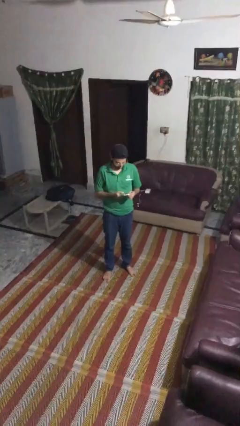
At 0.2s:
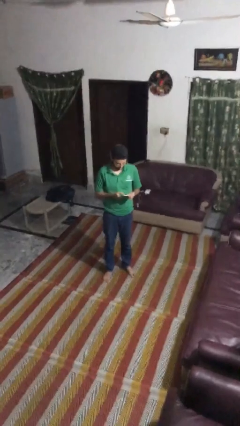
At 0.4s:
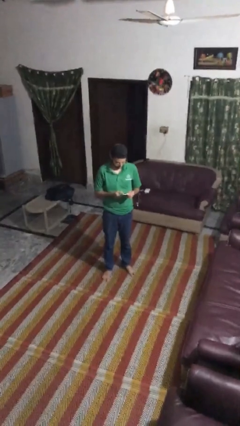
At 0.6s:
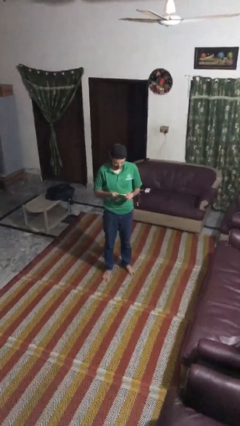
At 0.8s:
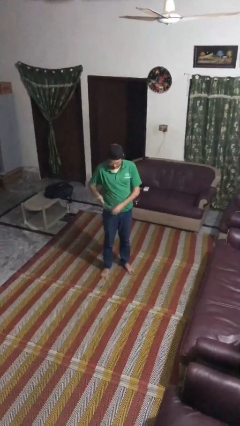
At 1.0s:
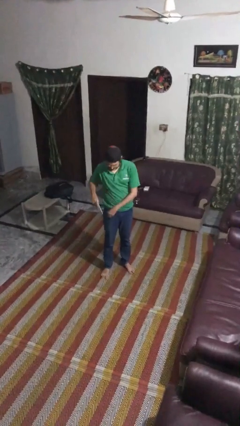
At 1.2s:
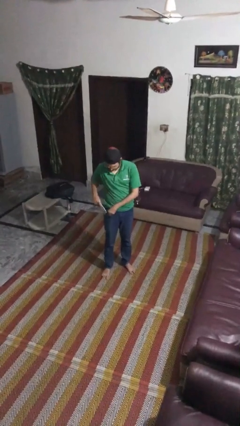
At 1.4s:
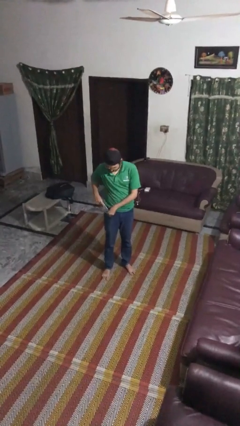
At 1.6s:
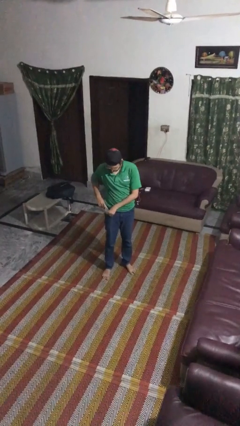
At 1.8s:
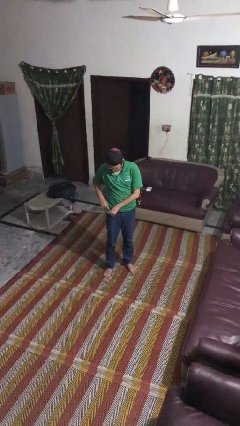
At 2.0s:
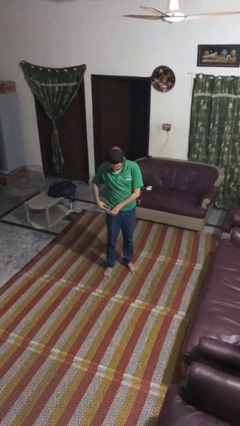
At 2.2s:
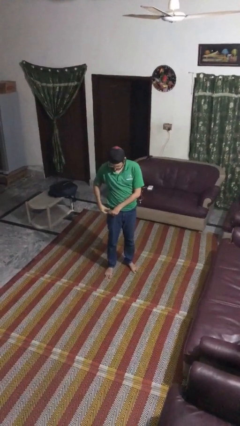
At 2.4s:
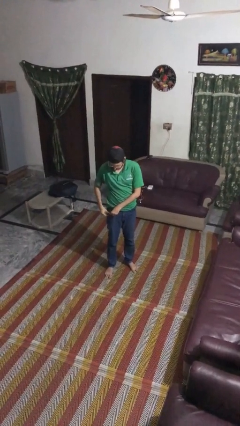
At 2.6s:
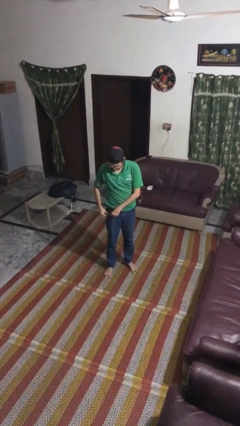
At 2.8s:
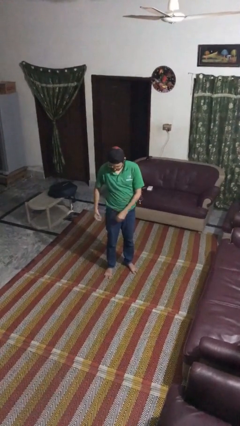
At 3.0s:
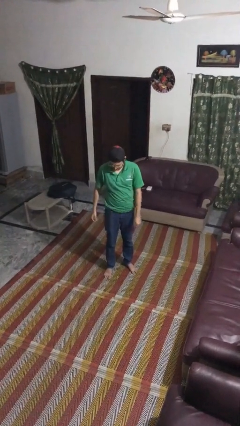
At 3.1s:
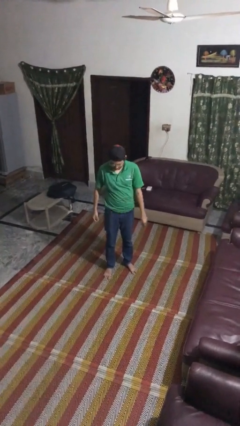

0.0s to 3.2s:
person puts phone into pocket

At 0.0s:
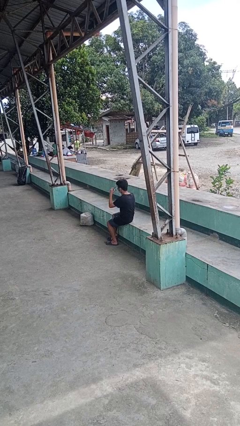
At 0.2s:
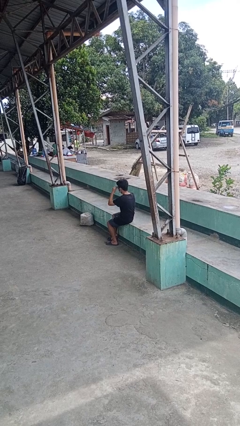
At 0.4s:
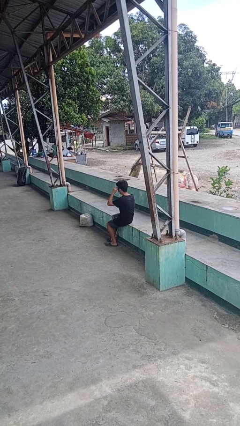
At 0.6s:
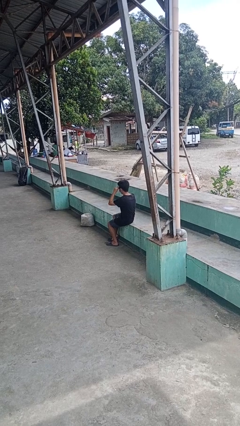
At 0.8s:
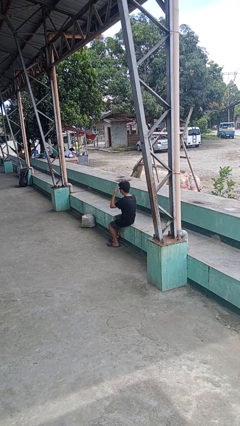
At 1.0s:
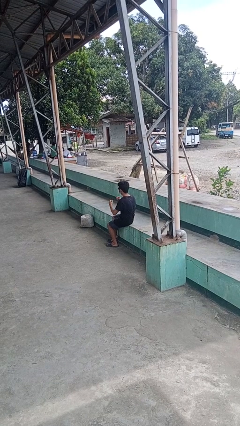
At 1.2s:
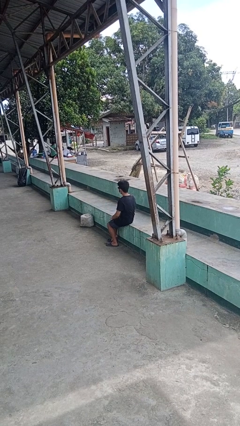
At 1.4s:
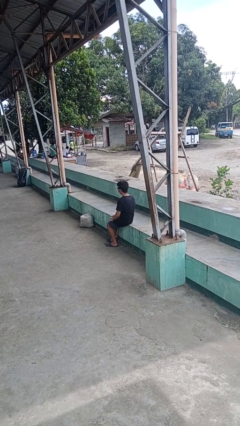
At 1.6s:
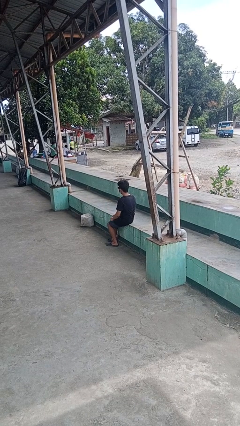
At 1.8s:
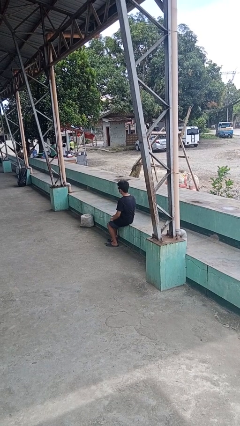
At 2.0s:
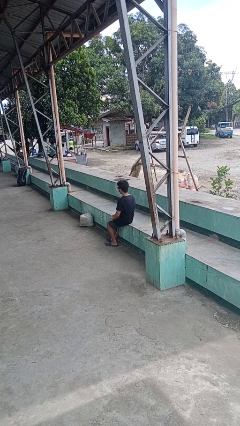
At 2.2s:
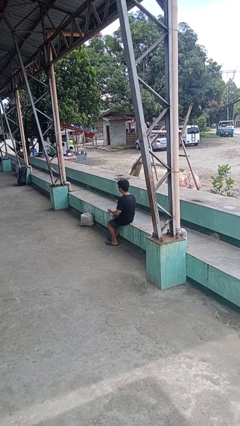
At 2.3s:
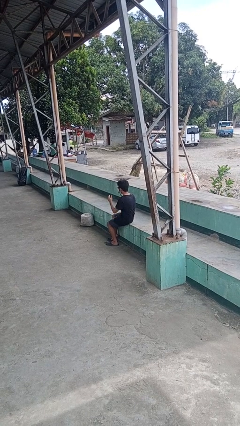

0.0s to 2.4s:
person puts on sunglasses

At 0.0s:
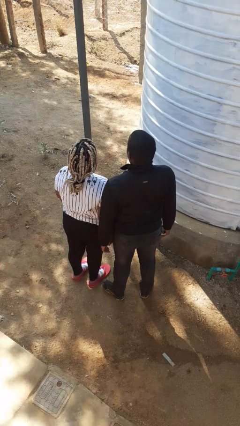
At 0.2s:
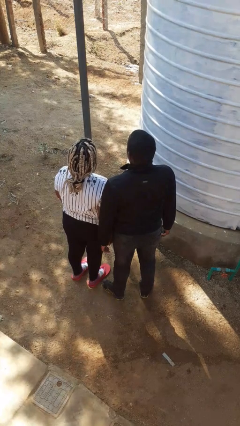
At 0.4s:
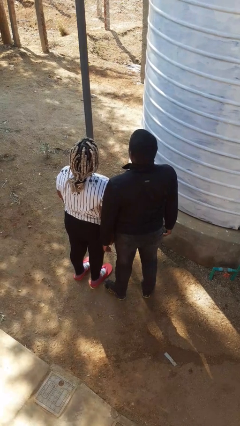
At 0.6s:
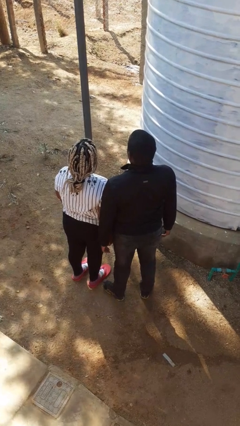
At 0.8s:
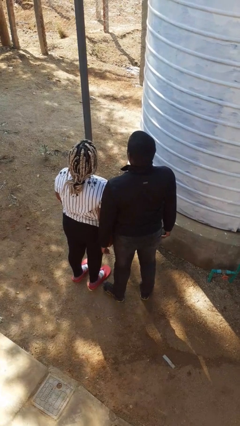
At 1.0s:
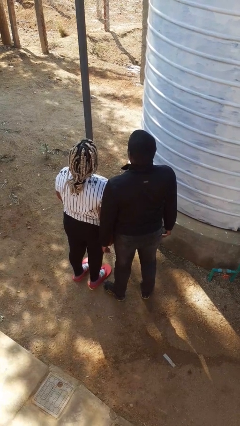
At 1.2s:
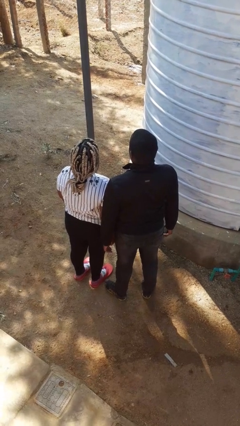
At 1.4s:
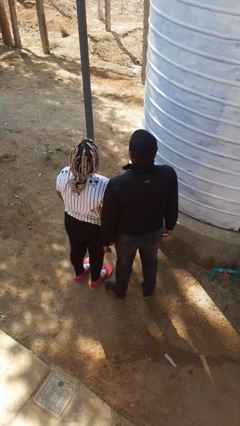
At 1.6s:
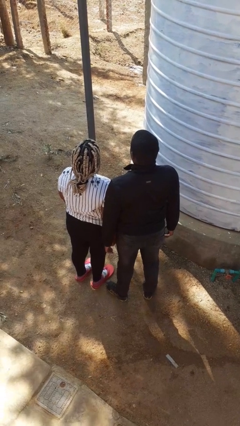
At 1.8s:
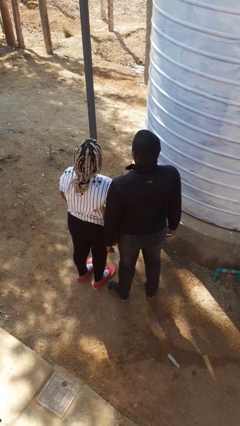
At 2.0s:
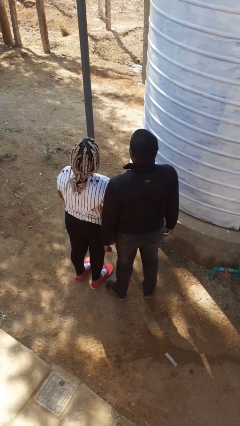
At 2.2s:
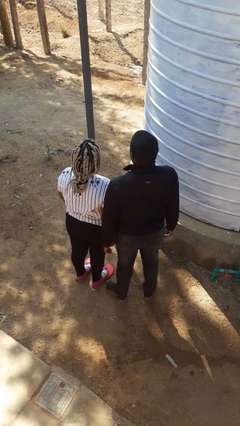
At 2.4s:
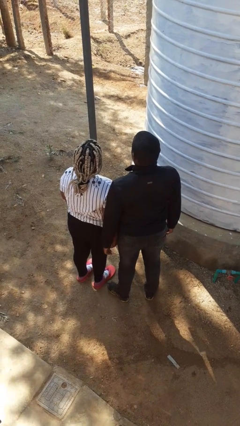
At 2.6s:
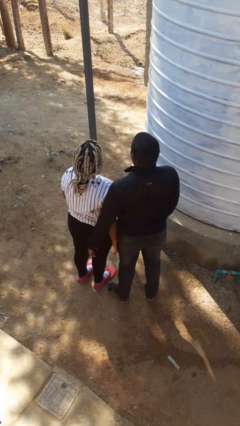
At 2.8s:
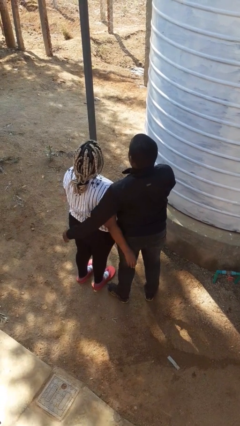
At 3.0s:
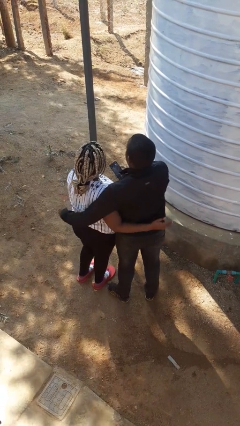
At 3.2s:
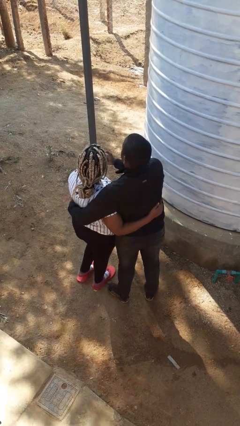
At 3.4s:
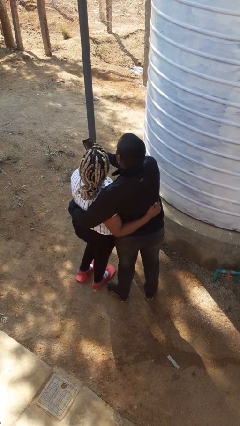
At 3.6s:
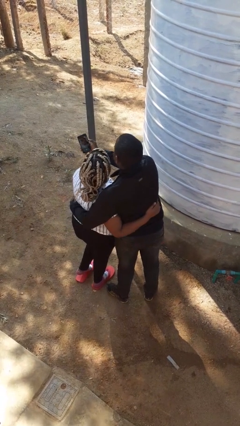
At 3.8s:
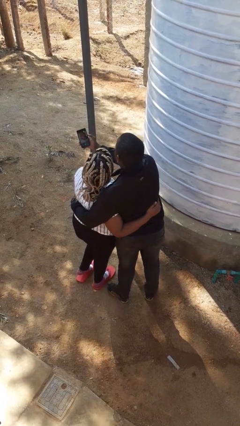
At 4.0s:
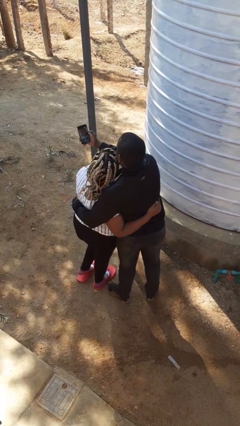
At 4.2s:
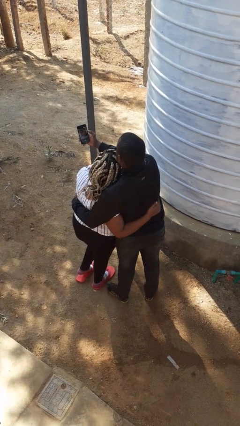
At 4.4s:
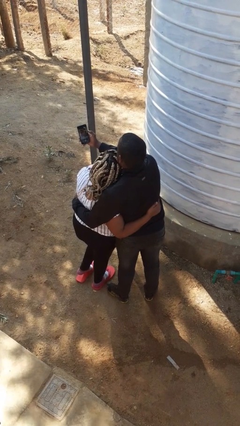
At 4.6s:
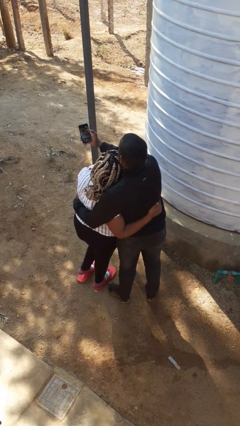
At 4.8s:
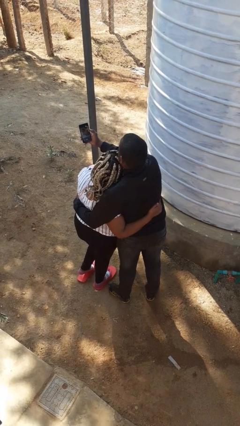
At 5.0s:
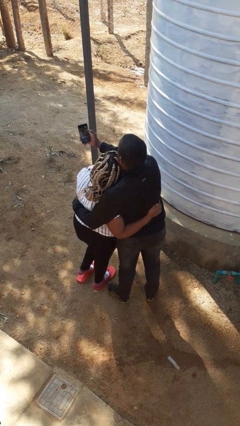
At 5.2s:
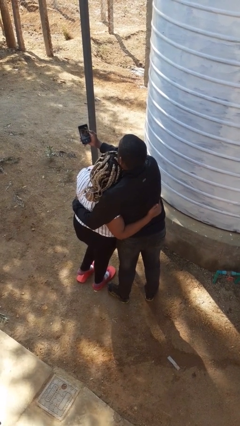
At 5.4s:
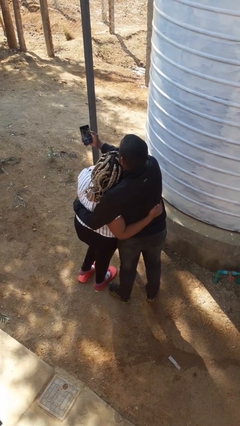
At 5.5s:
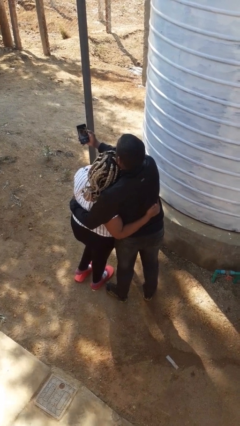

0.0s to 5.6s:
person takes selfie with person

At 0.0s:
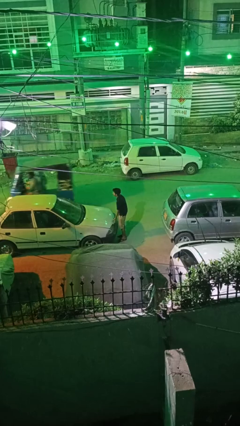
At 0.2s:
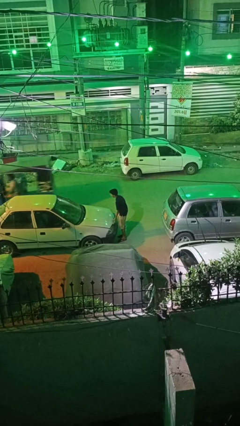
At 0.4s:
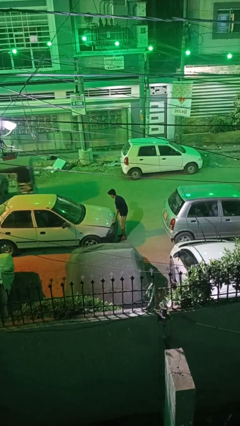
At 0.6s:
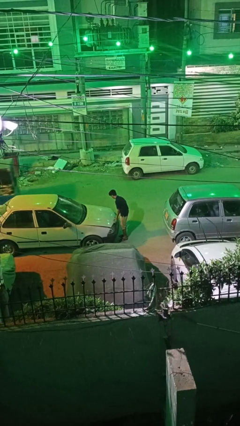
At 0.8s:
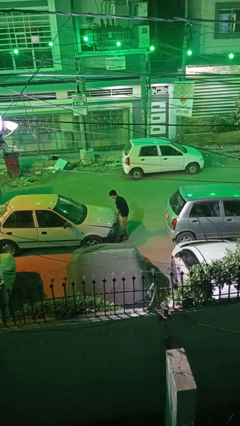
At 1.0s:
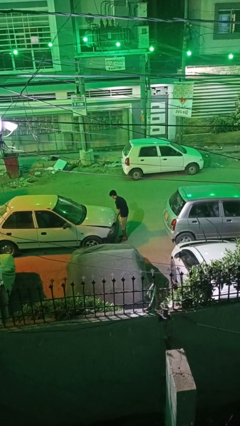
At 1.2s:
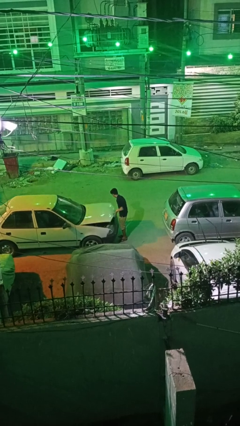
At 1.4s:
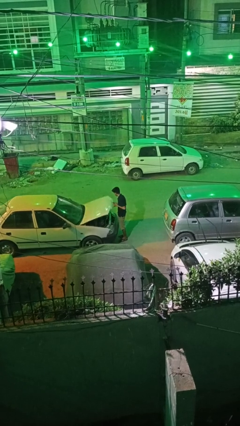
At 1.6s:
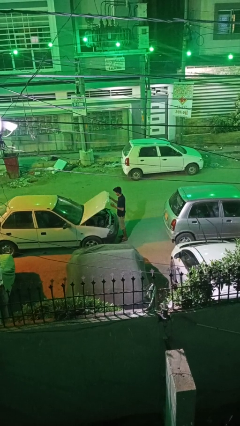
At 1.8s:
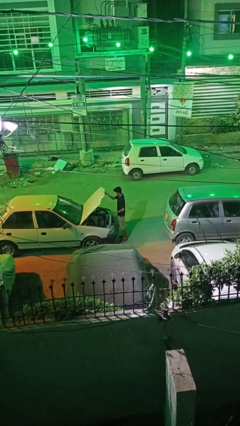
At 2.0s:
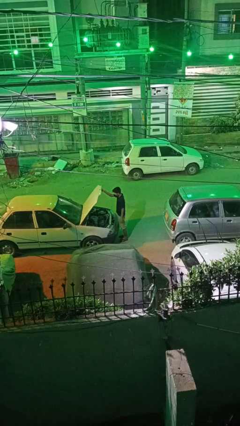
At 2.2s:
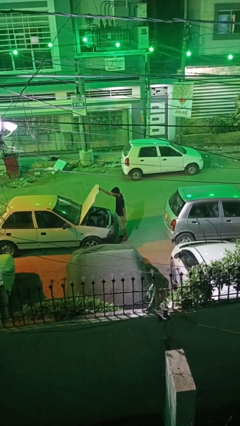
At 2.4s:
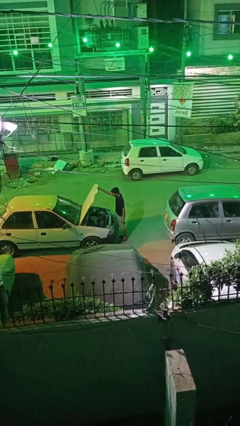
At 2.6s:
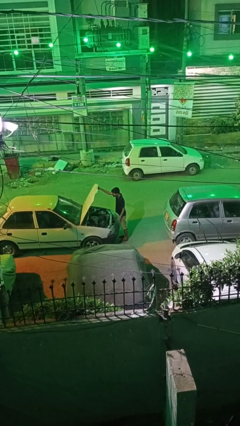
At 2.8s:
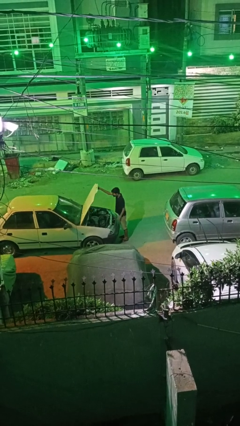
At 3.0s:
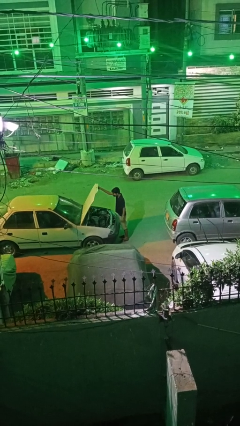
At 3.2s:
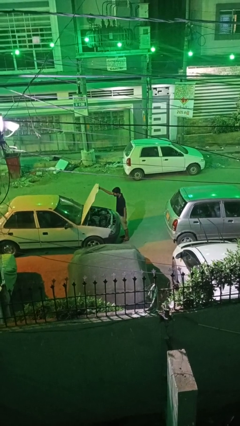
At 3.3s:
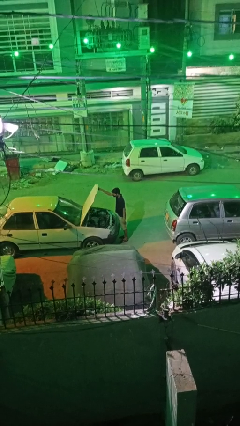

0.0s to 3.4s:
person opens car hood

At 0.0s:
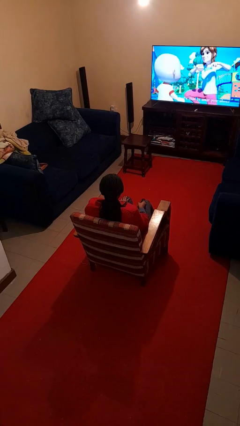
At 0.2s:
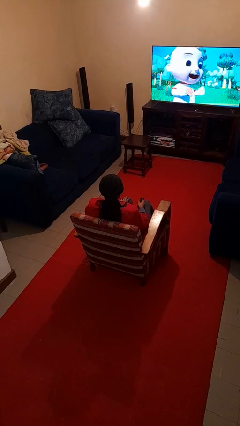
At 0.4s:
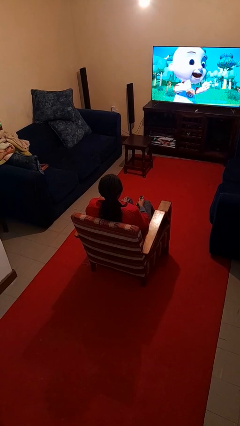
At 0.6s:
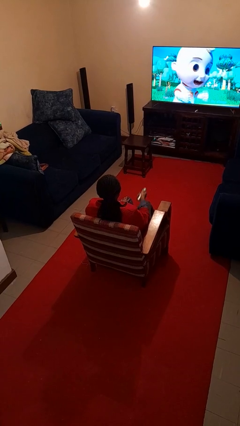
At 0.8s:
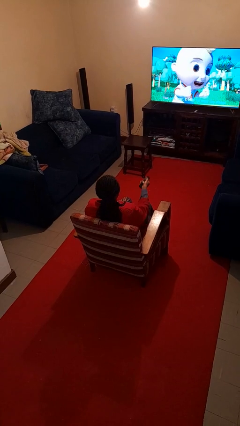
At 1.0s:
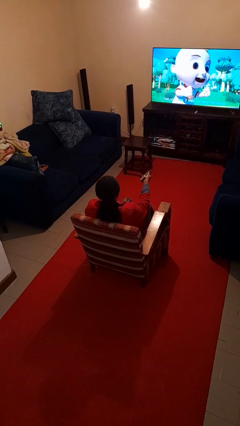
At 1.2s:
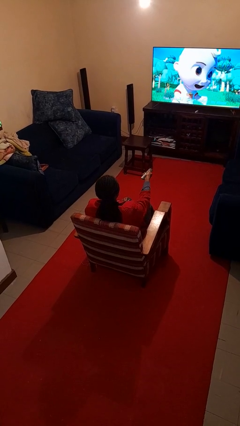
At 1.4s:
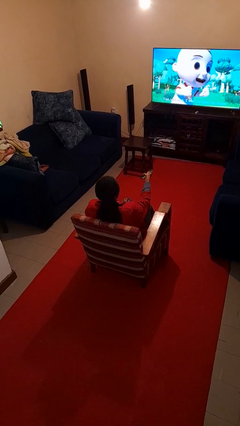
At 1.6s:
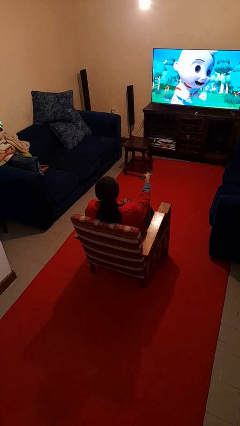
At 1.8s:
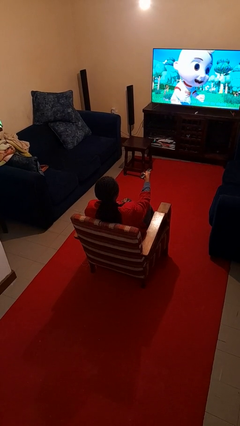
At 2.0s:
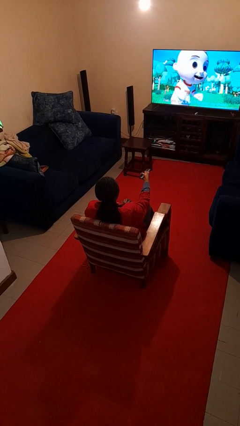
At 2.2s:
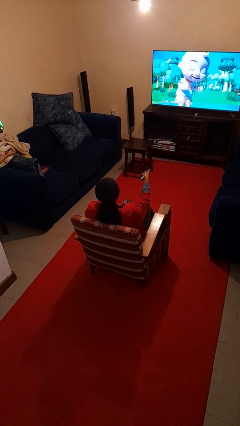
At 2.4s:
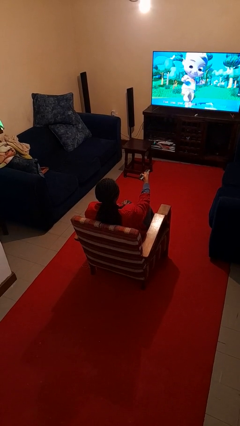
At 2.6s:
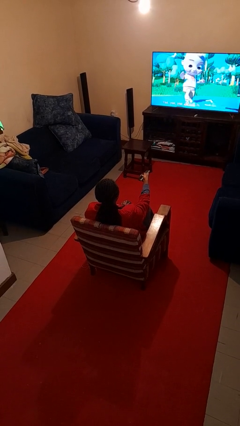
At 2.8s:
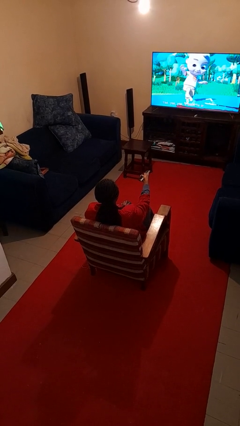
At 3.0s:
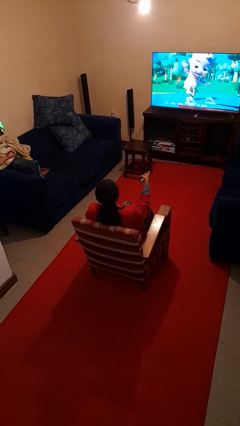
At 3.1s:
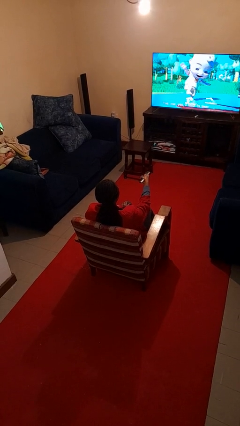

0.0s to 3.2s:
person uses television remote
